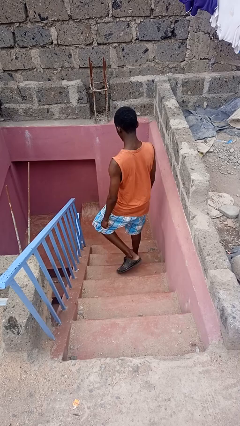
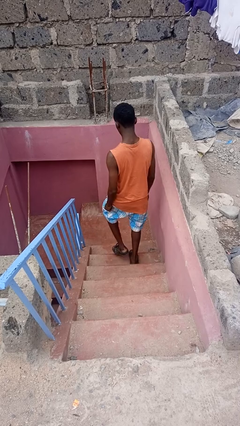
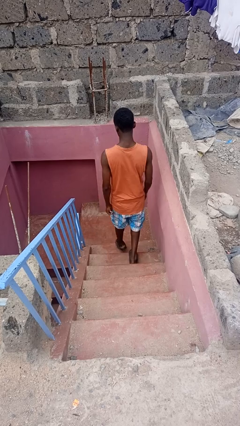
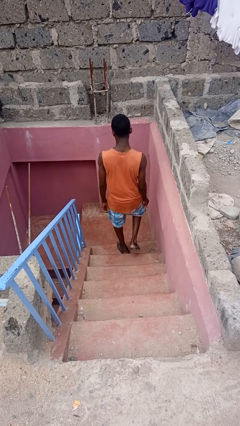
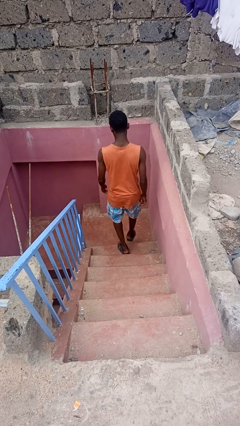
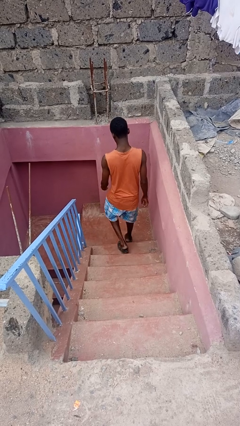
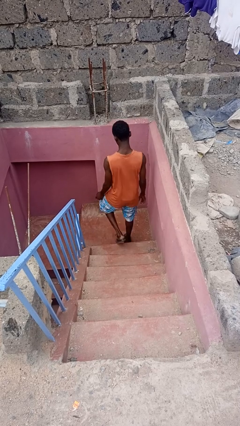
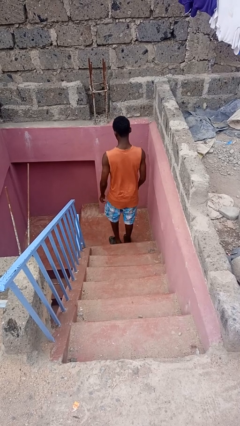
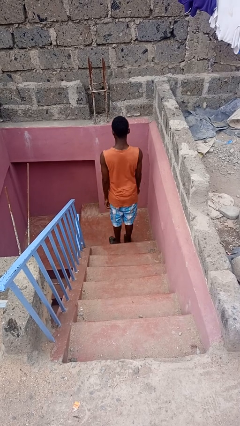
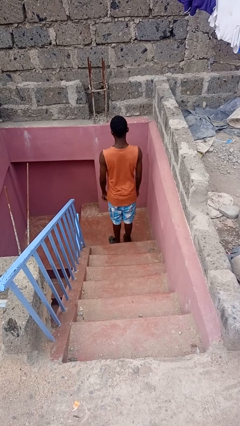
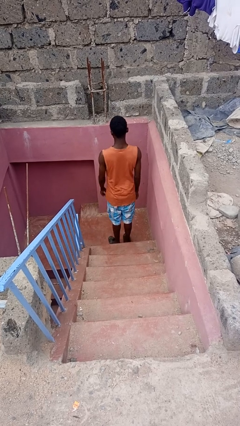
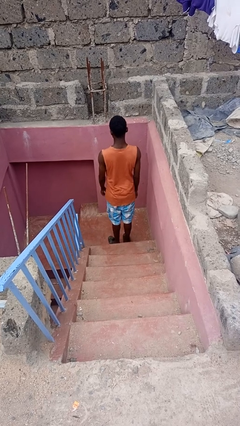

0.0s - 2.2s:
person climbs down stairs

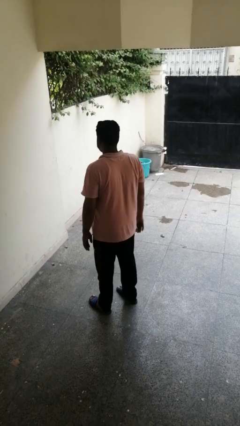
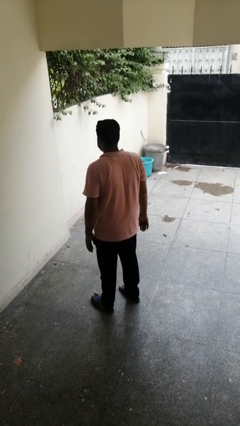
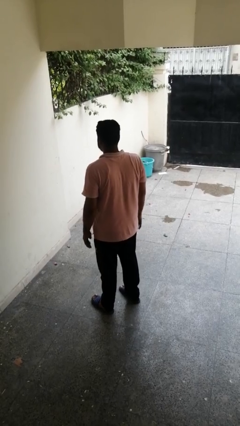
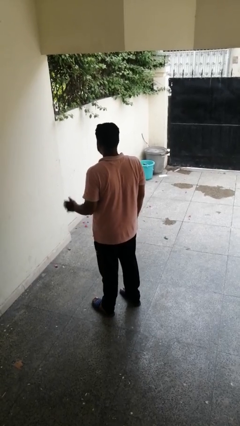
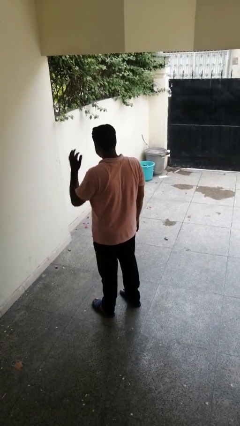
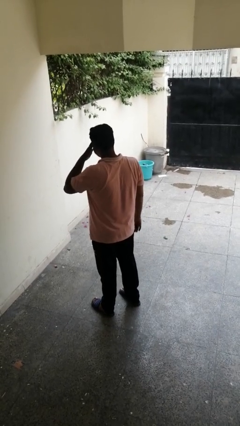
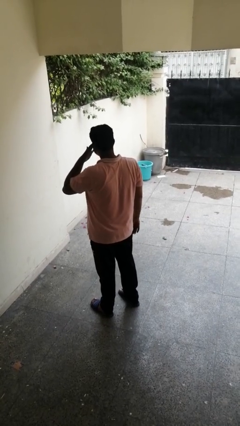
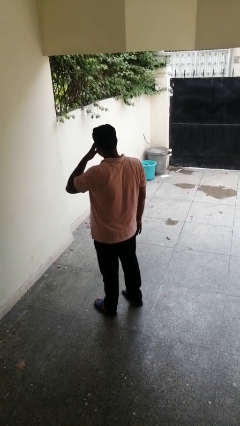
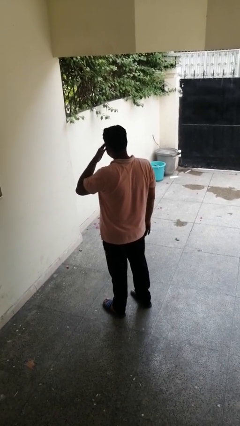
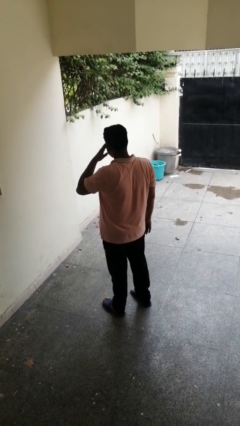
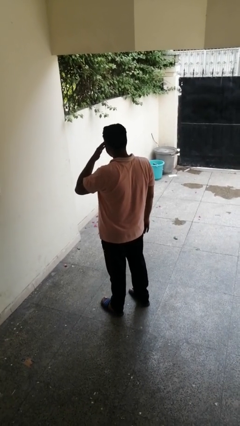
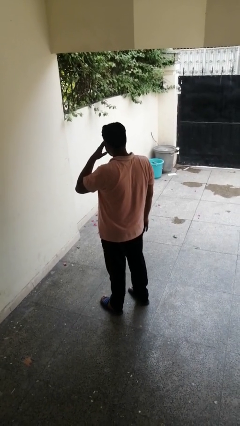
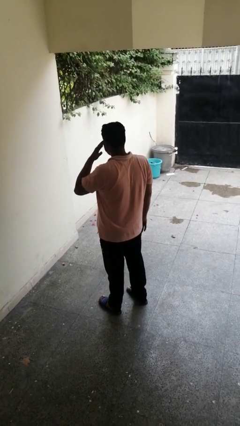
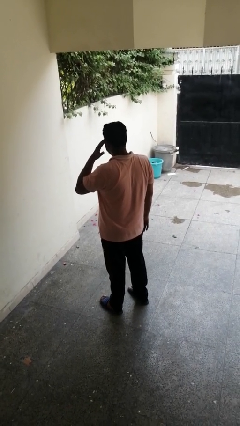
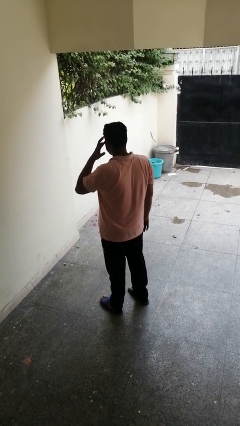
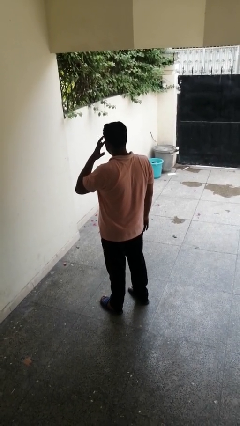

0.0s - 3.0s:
person rubs eyes

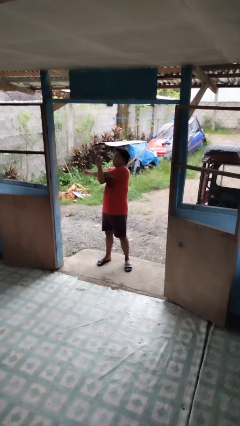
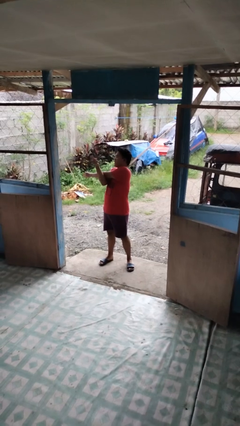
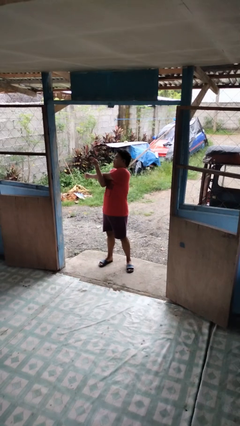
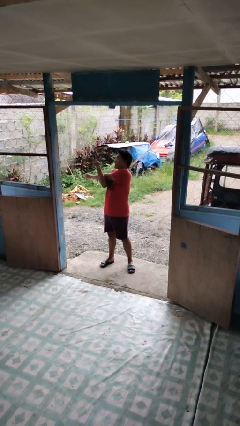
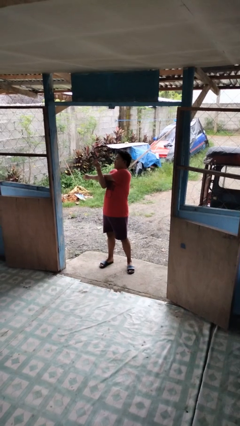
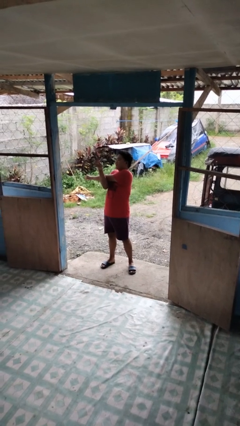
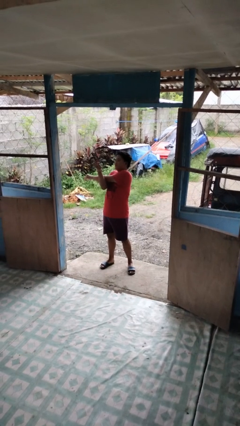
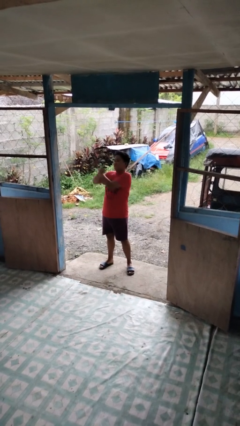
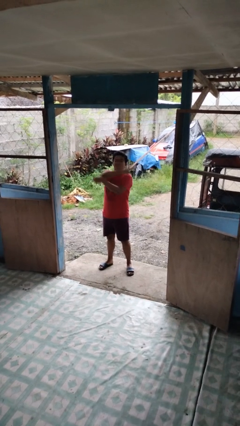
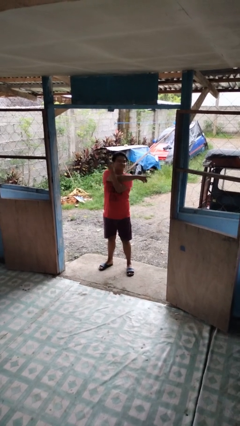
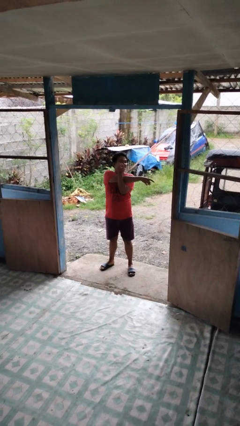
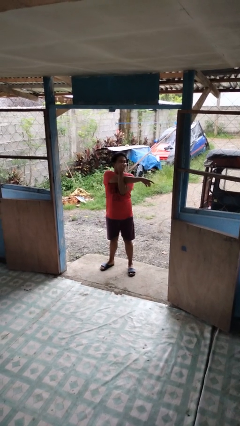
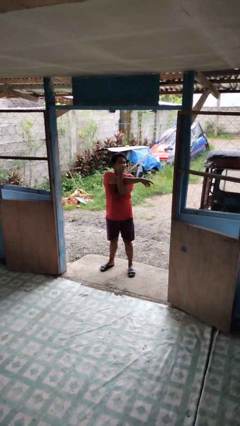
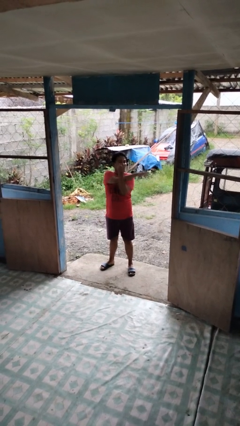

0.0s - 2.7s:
person stretches arms to side

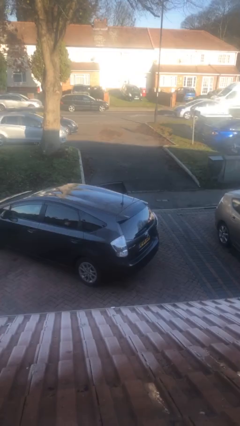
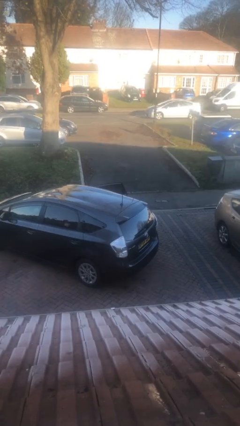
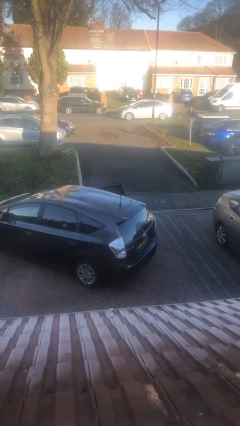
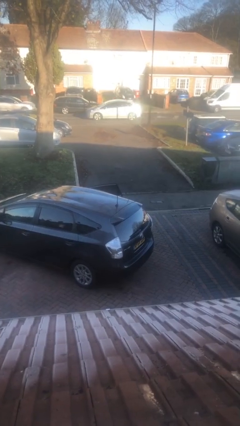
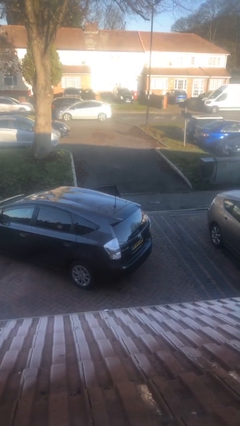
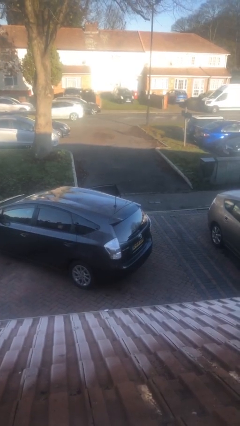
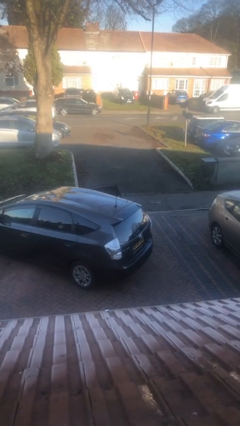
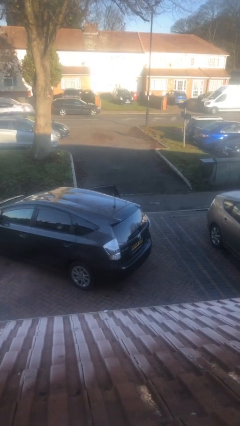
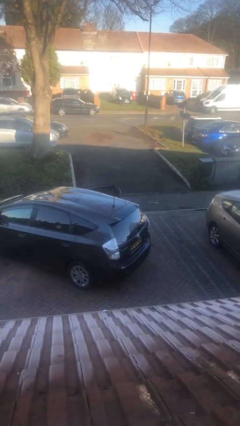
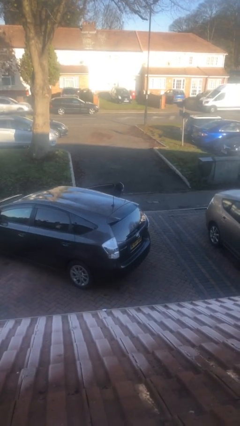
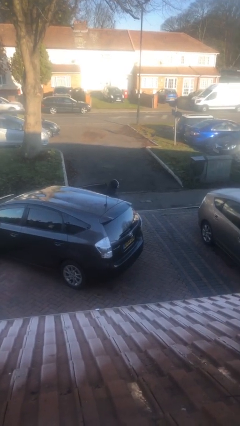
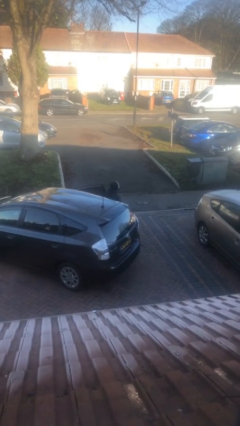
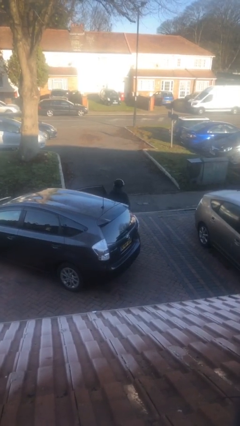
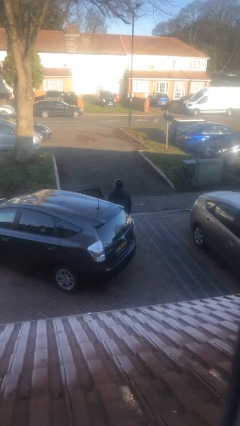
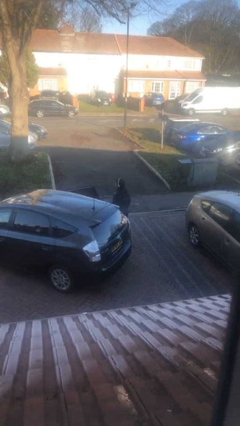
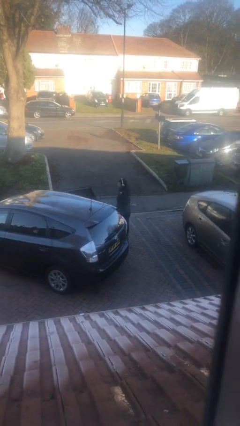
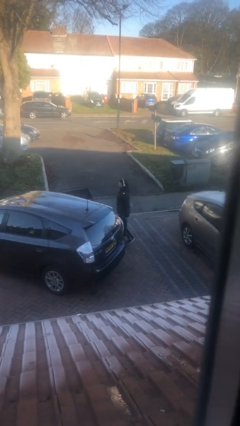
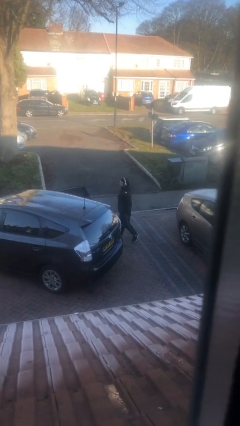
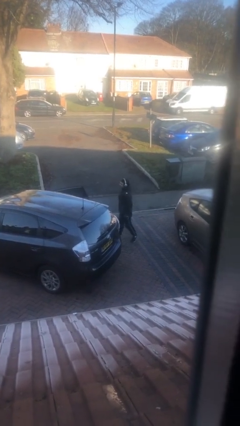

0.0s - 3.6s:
person exits car

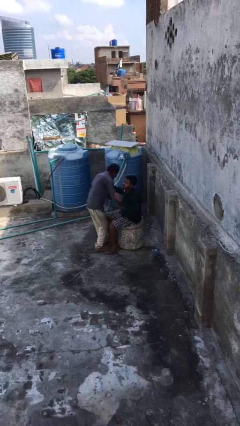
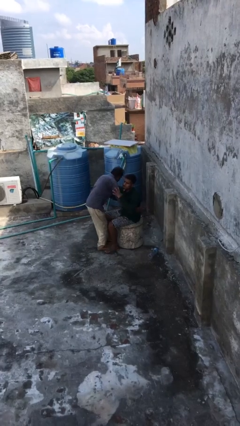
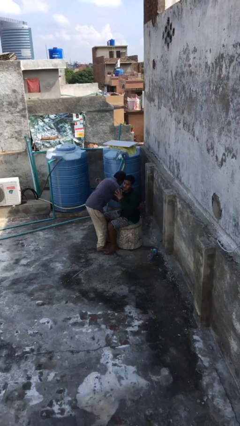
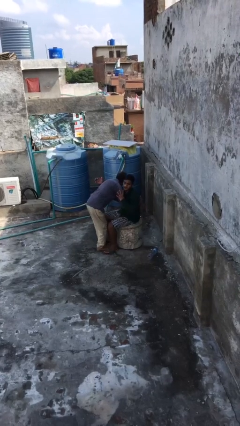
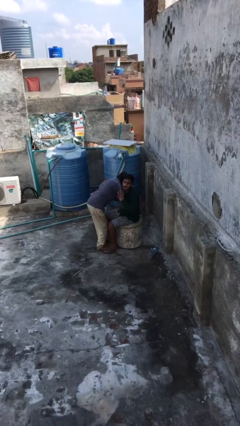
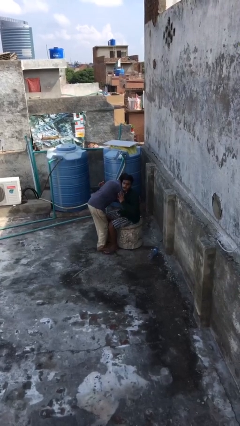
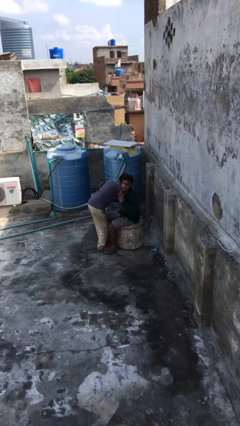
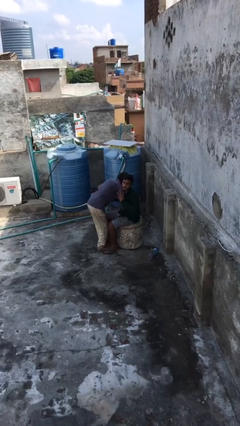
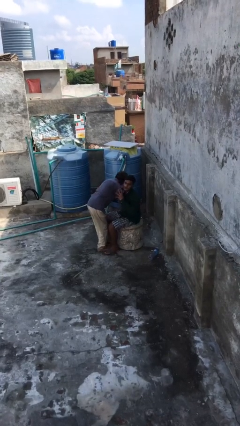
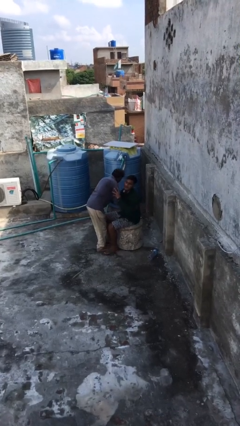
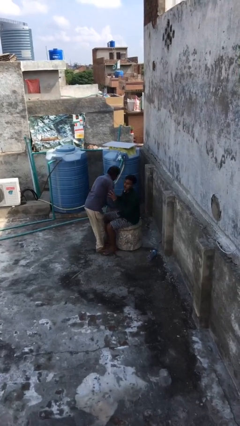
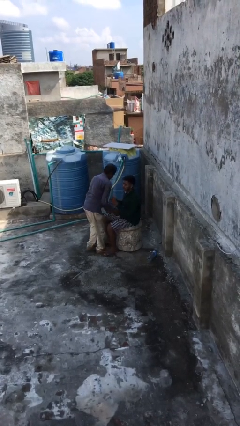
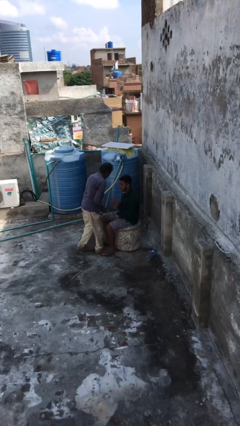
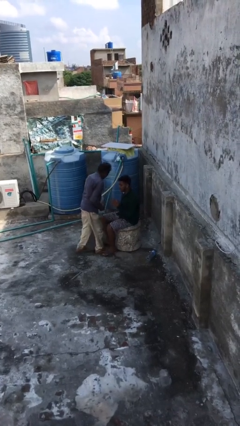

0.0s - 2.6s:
person embraces person

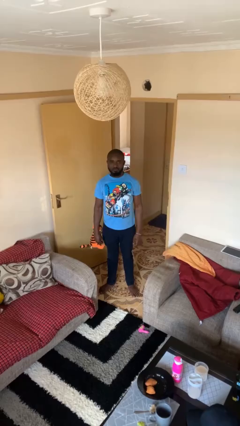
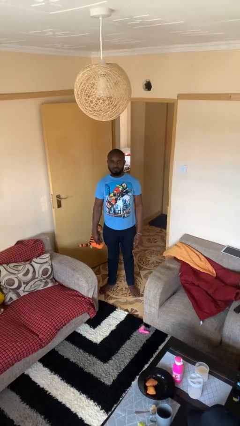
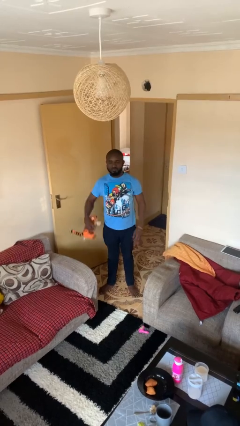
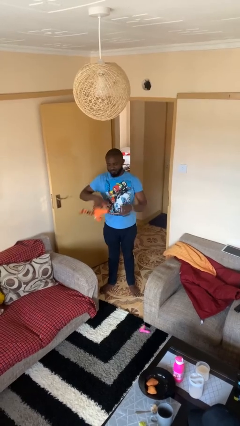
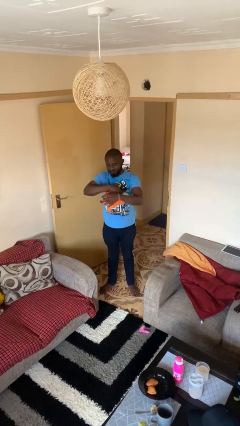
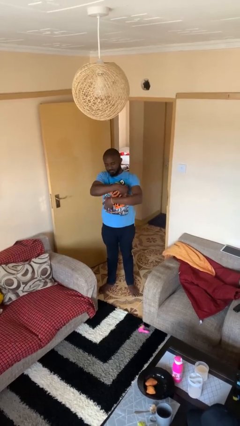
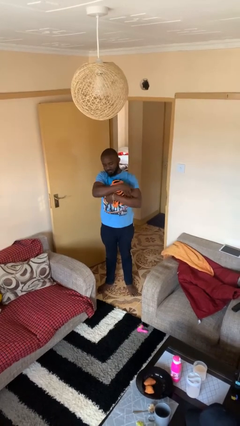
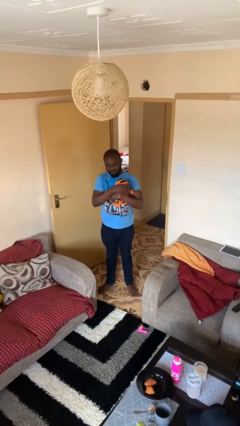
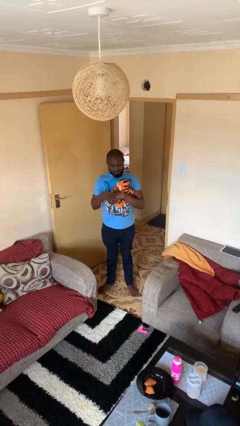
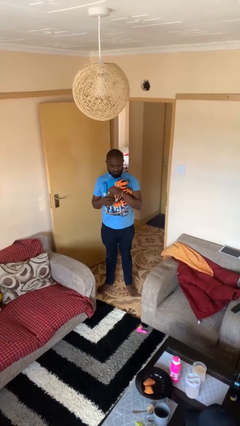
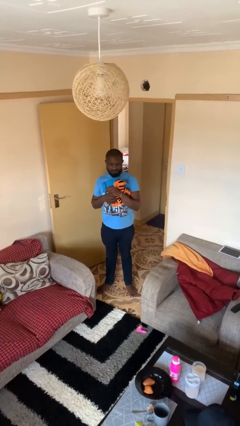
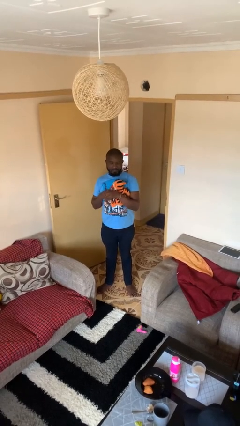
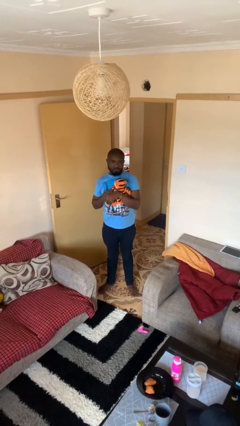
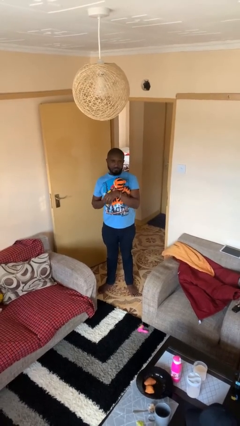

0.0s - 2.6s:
person hugs stuffed animal

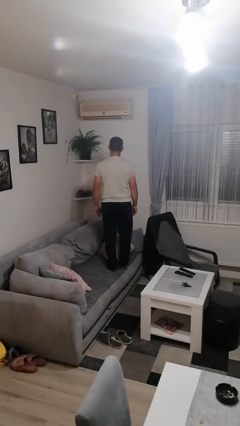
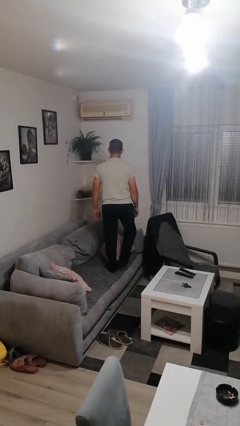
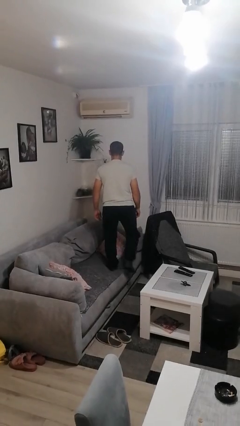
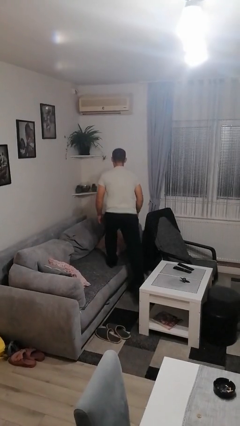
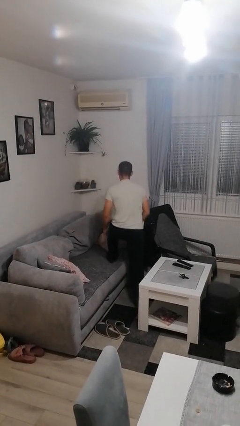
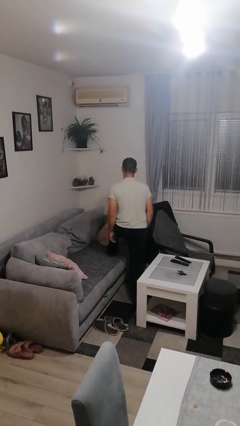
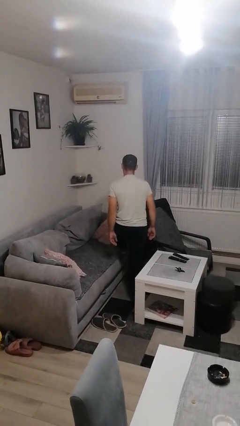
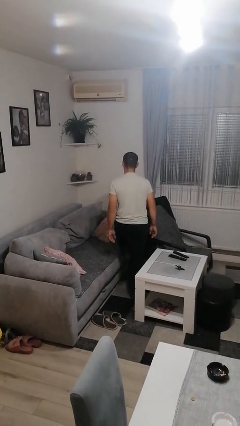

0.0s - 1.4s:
person climbs off couch
